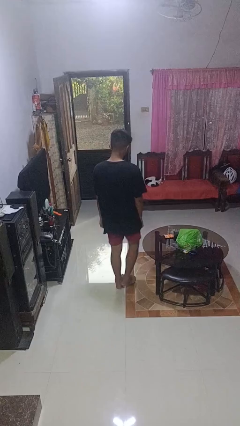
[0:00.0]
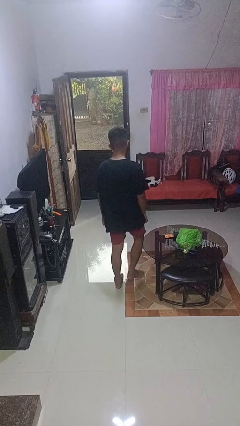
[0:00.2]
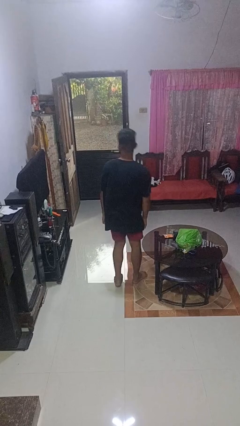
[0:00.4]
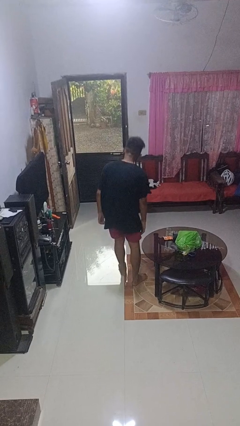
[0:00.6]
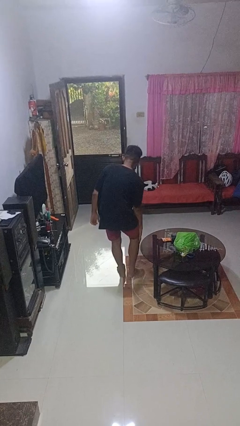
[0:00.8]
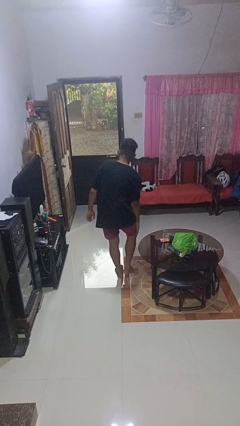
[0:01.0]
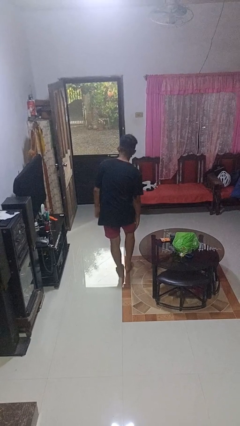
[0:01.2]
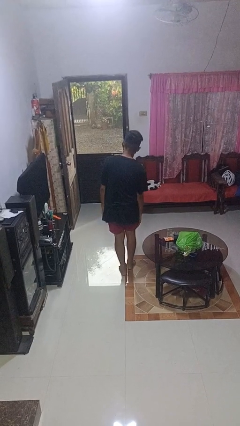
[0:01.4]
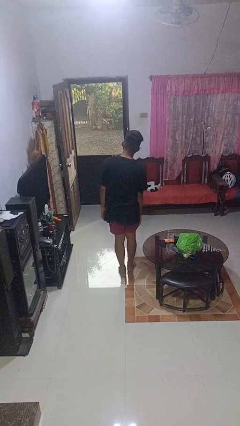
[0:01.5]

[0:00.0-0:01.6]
person bumps into table

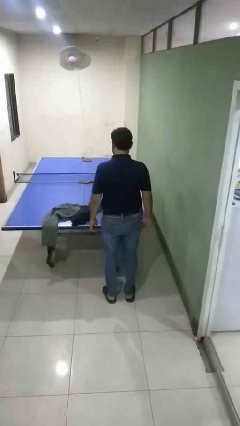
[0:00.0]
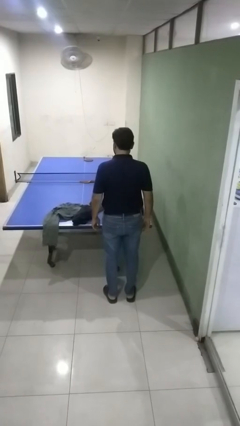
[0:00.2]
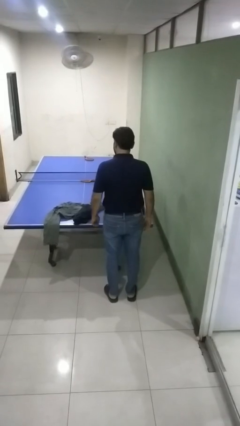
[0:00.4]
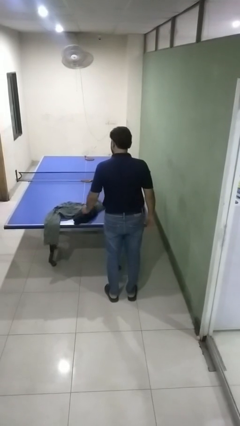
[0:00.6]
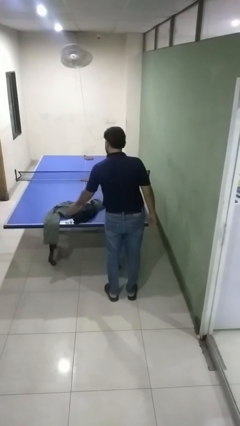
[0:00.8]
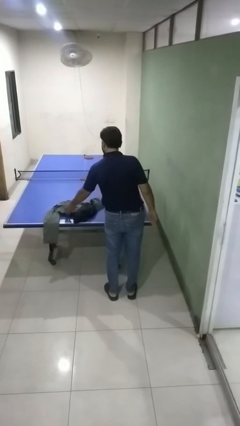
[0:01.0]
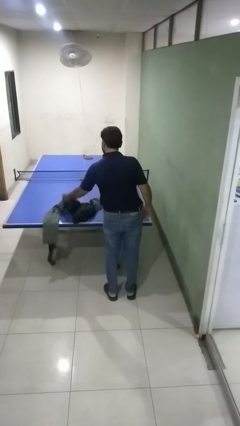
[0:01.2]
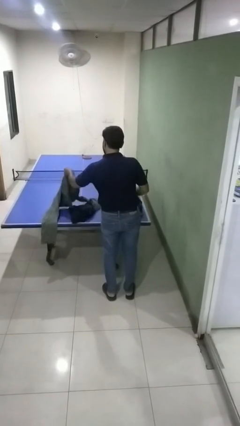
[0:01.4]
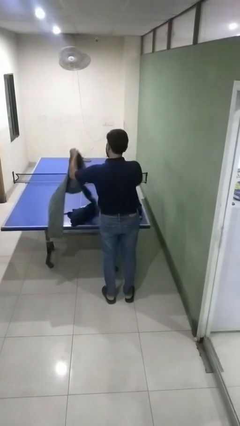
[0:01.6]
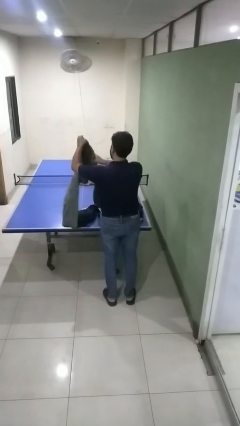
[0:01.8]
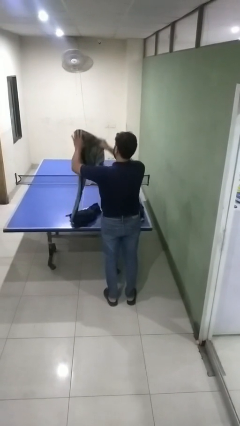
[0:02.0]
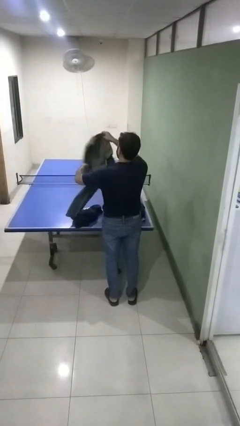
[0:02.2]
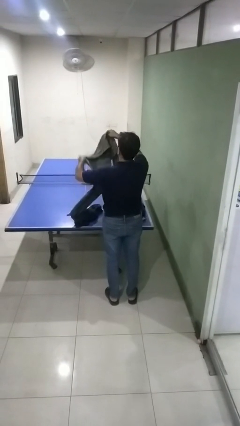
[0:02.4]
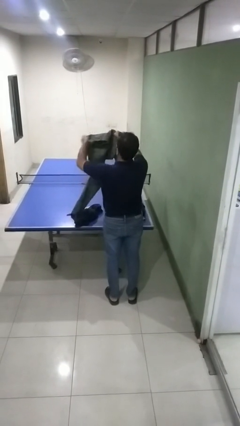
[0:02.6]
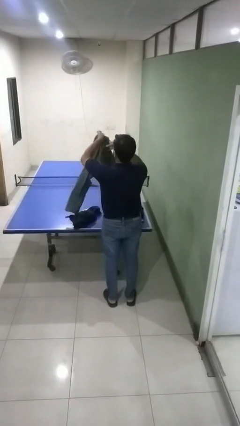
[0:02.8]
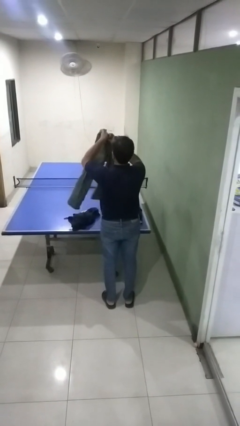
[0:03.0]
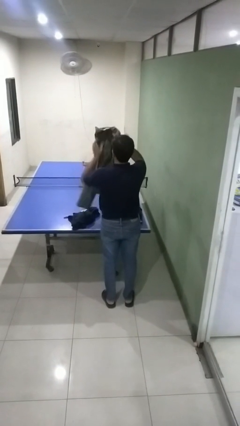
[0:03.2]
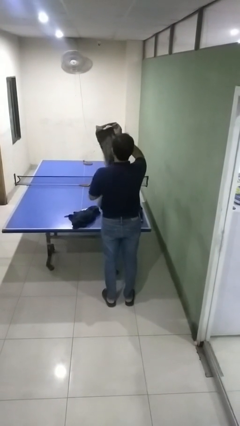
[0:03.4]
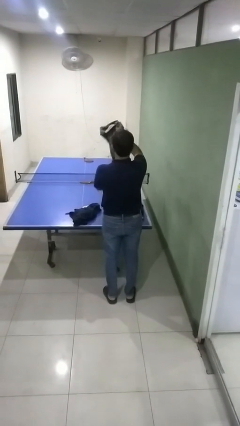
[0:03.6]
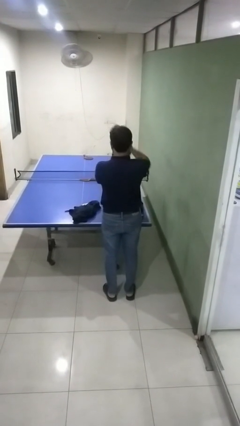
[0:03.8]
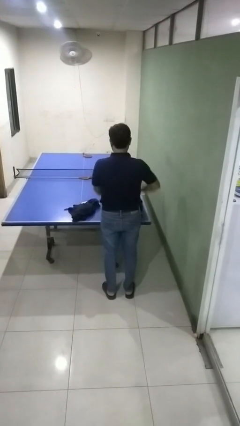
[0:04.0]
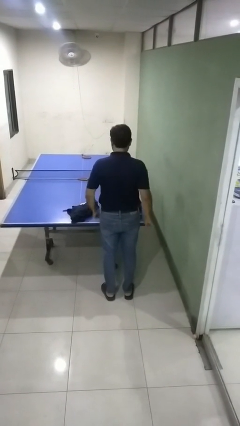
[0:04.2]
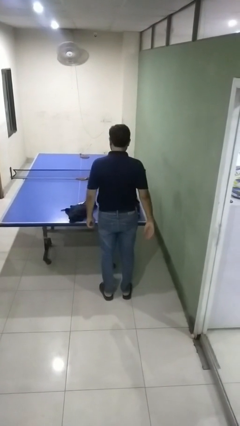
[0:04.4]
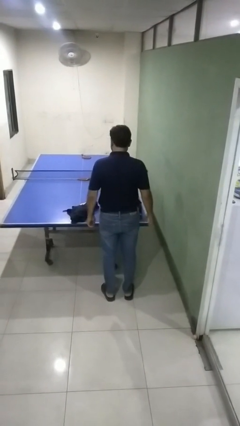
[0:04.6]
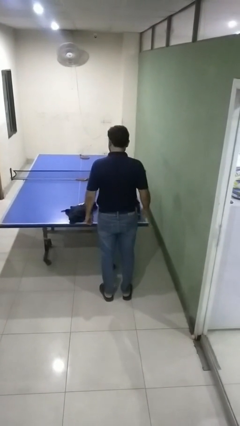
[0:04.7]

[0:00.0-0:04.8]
person folds pants

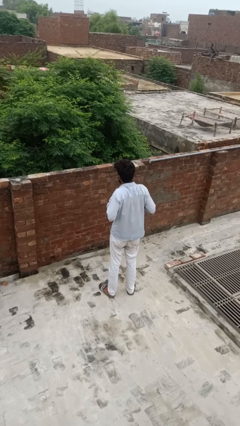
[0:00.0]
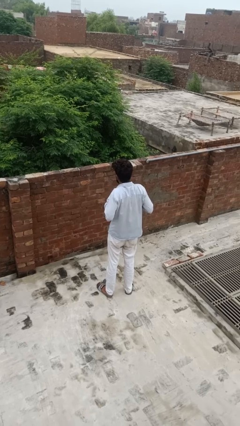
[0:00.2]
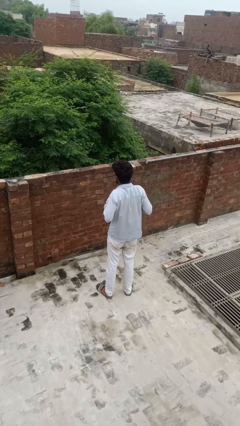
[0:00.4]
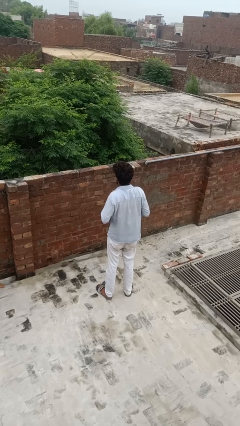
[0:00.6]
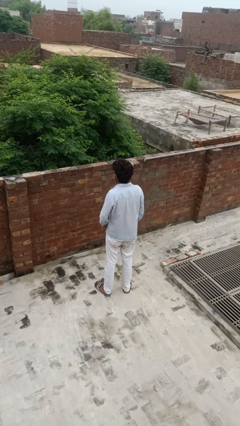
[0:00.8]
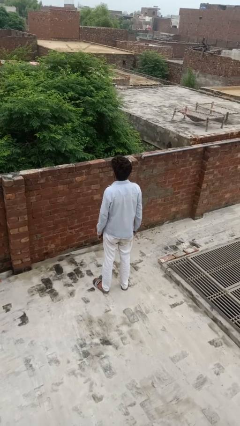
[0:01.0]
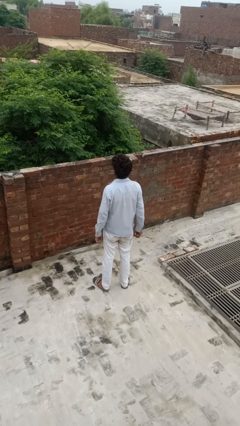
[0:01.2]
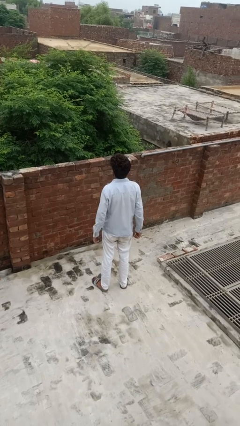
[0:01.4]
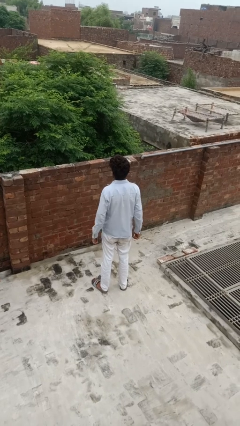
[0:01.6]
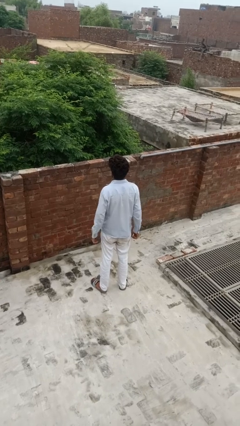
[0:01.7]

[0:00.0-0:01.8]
person cracks knuckles

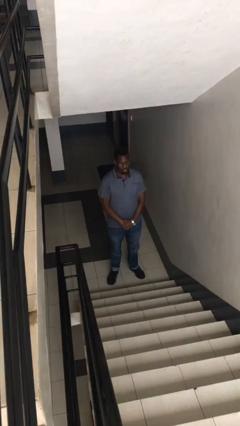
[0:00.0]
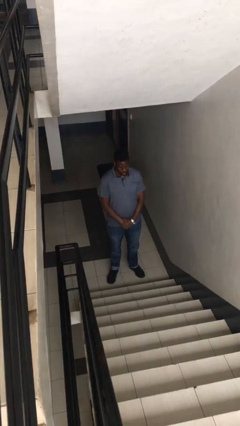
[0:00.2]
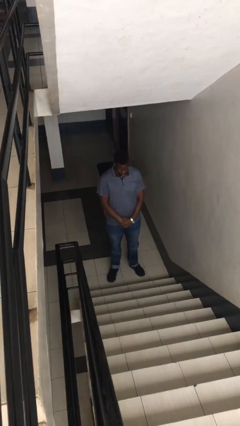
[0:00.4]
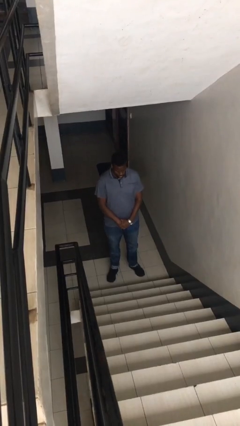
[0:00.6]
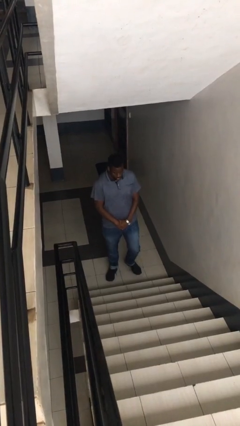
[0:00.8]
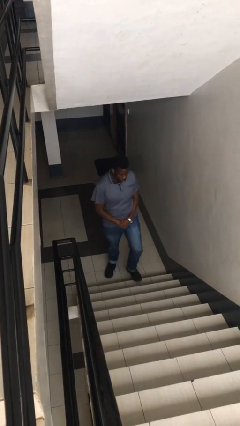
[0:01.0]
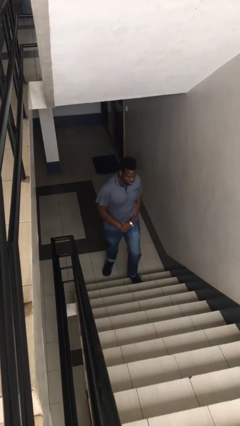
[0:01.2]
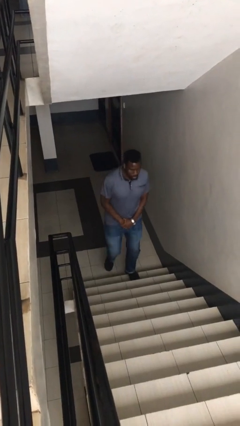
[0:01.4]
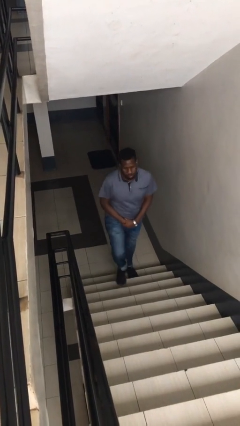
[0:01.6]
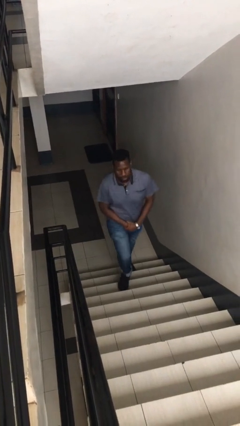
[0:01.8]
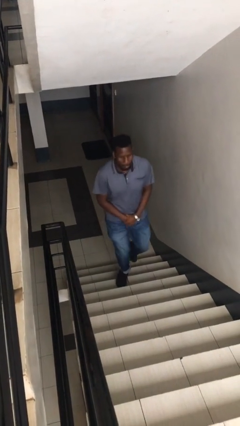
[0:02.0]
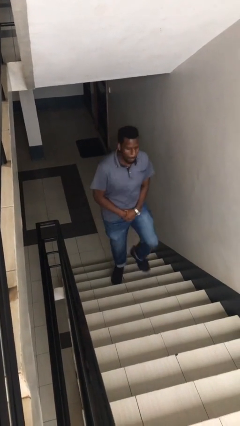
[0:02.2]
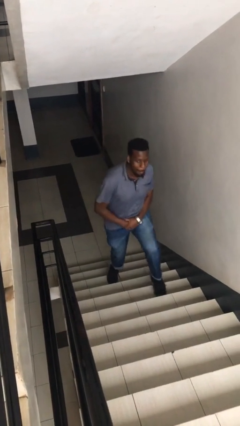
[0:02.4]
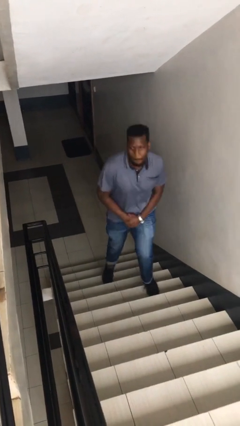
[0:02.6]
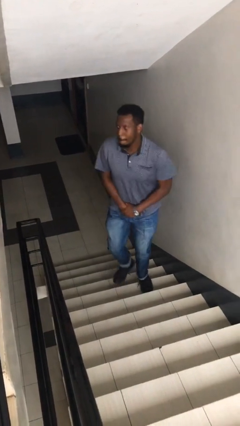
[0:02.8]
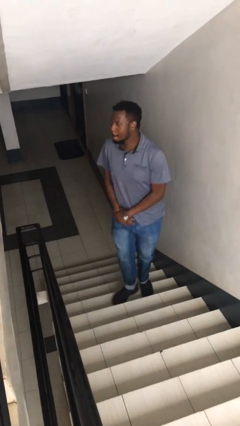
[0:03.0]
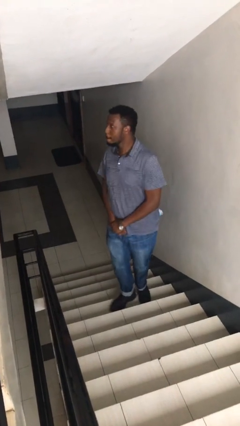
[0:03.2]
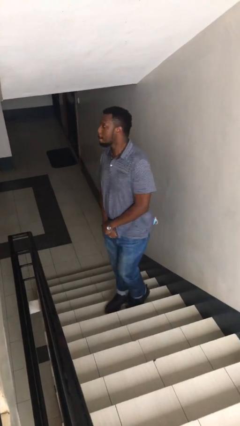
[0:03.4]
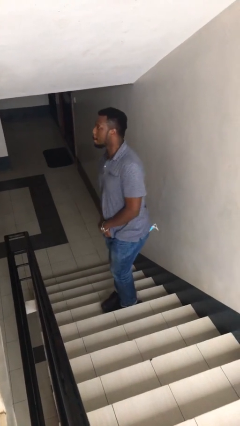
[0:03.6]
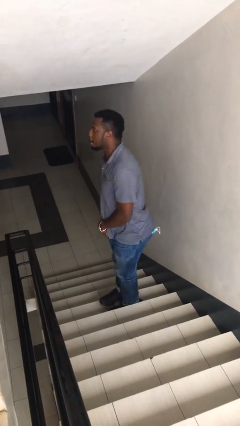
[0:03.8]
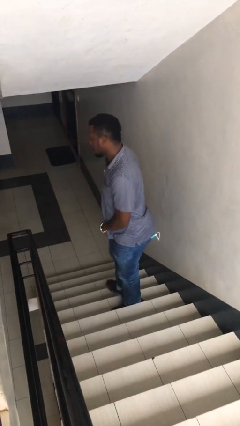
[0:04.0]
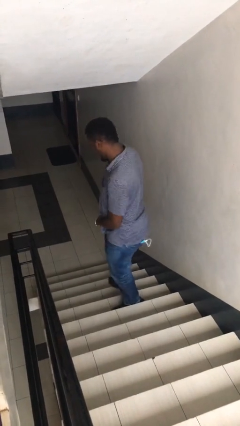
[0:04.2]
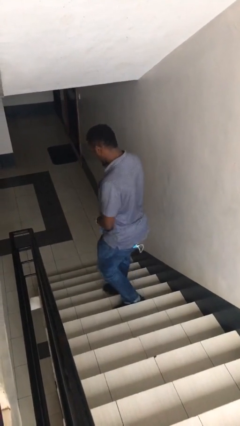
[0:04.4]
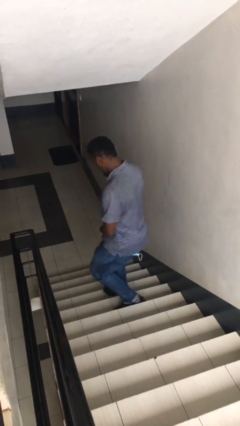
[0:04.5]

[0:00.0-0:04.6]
person climbs up stairs

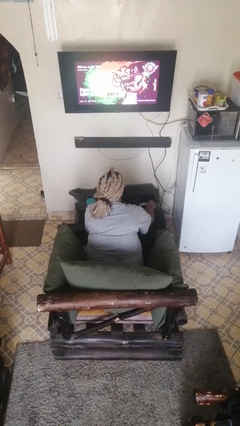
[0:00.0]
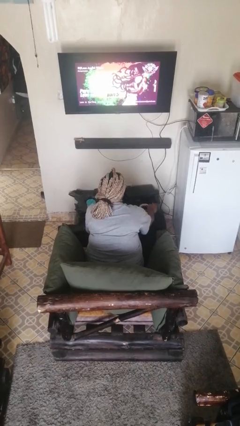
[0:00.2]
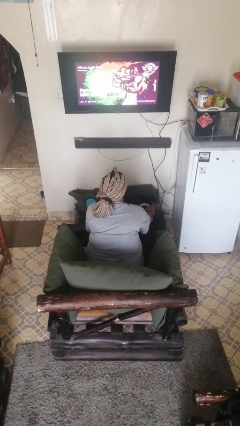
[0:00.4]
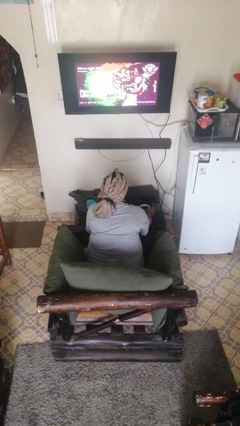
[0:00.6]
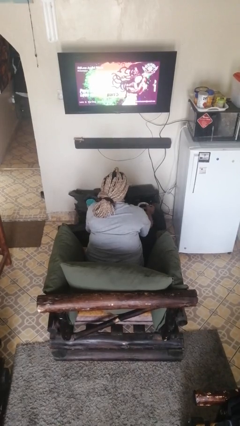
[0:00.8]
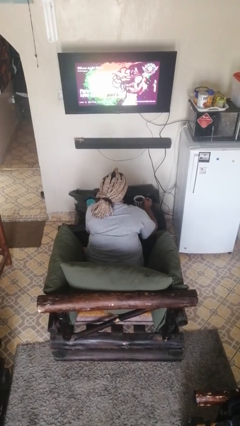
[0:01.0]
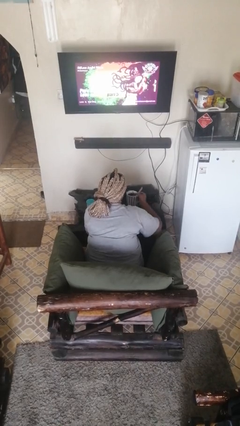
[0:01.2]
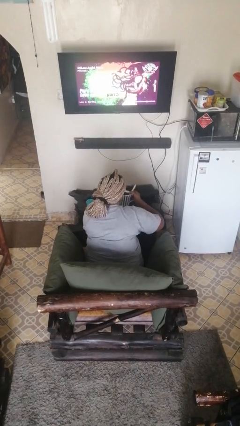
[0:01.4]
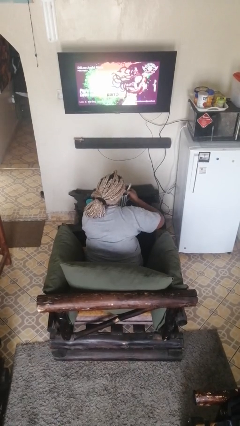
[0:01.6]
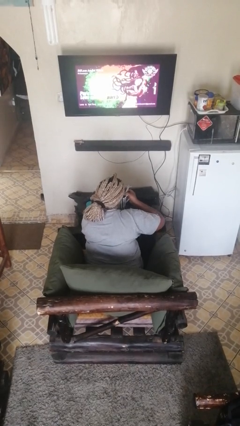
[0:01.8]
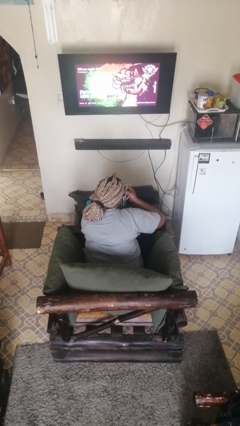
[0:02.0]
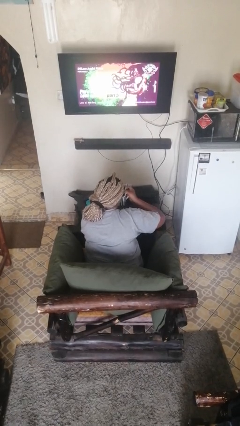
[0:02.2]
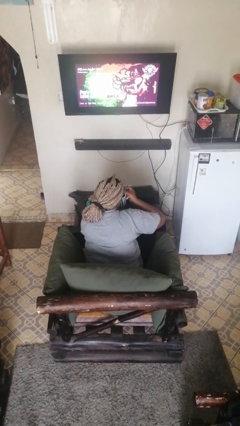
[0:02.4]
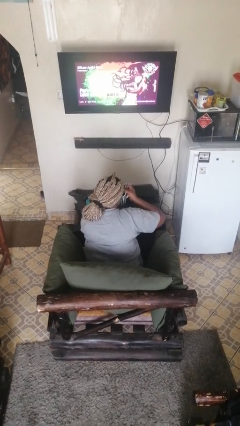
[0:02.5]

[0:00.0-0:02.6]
person drinks from mug

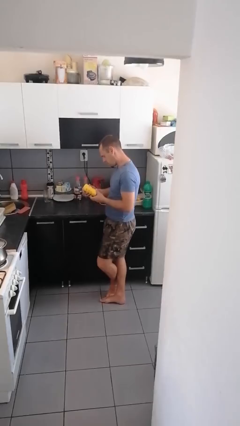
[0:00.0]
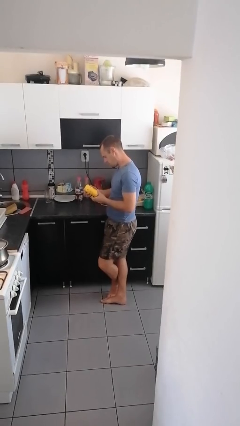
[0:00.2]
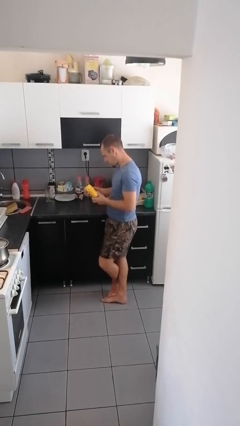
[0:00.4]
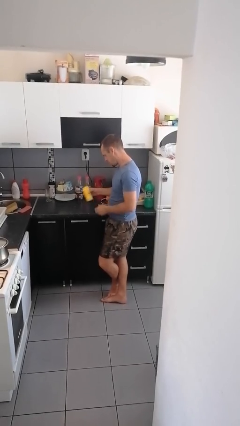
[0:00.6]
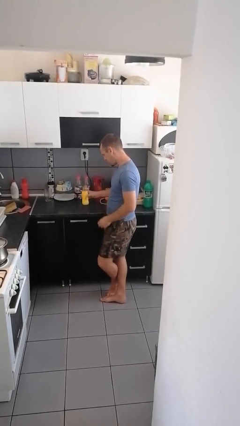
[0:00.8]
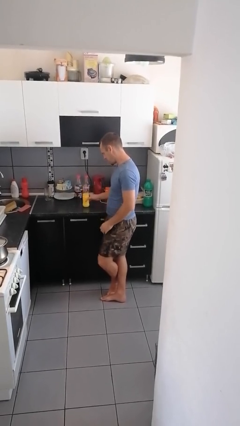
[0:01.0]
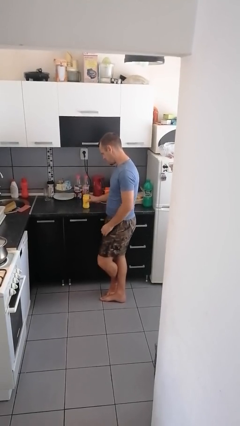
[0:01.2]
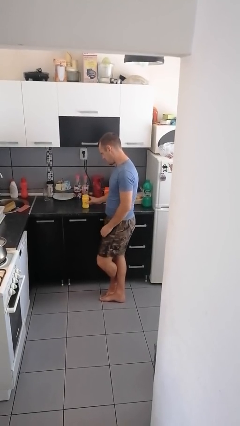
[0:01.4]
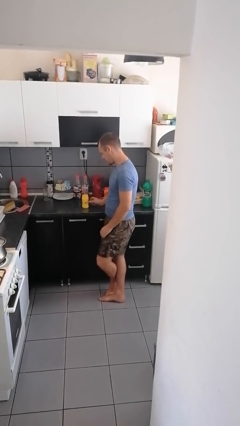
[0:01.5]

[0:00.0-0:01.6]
person puts down object on countertop

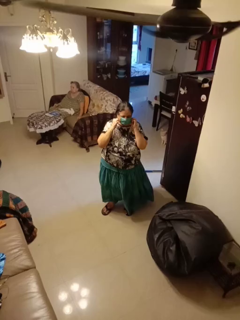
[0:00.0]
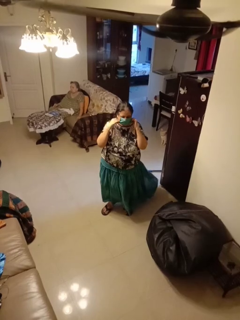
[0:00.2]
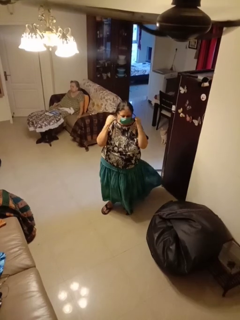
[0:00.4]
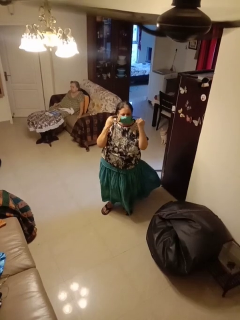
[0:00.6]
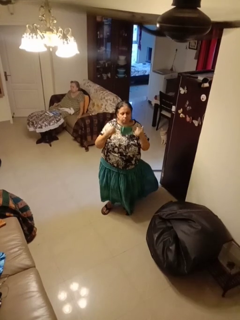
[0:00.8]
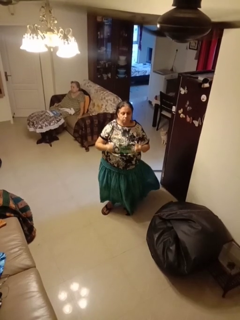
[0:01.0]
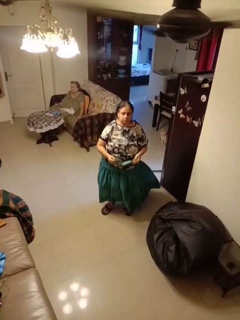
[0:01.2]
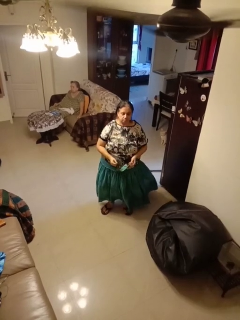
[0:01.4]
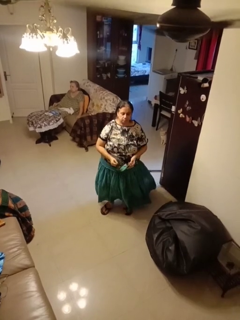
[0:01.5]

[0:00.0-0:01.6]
person takes off facemask
